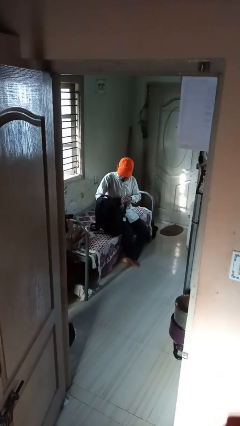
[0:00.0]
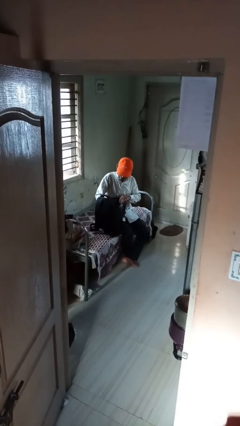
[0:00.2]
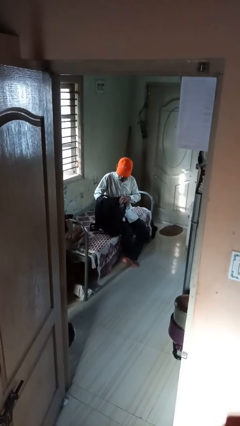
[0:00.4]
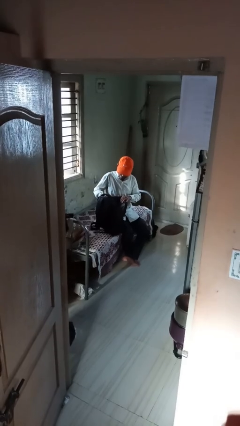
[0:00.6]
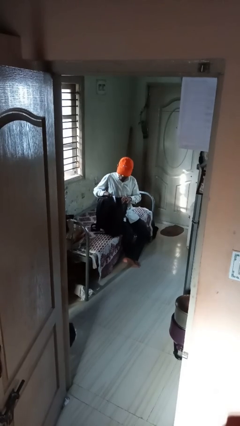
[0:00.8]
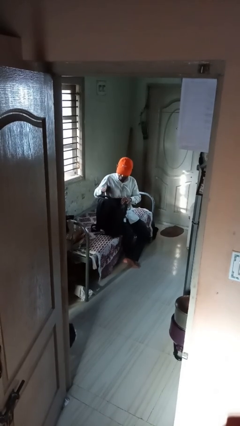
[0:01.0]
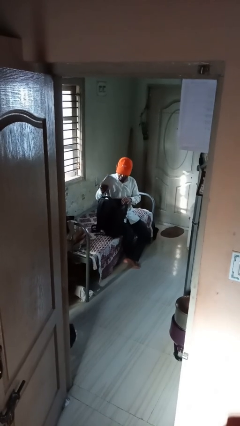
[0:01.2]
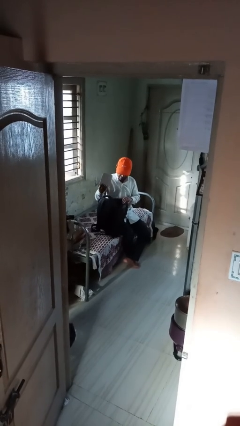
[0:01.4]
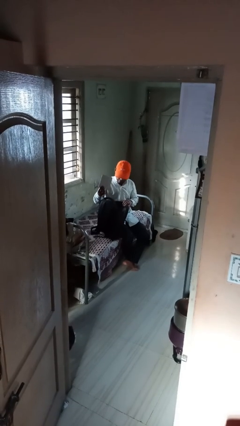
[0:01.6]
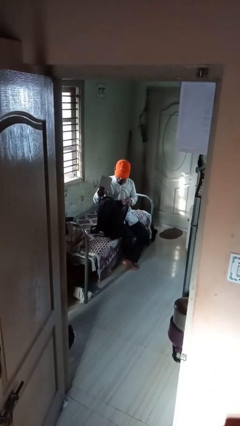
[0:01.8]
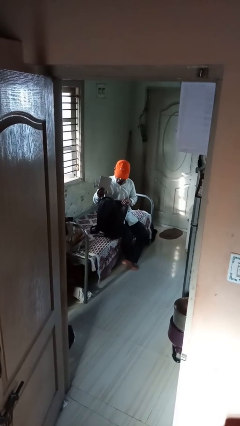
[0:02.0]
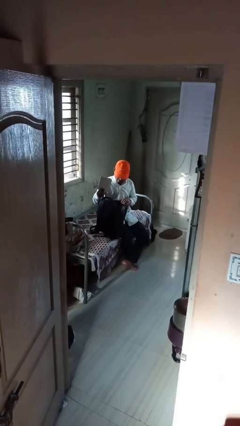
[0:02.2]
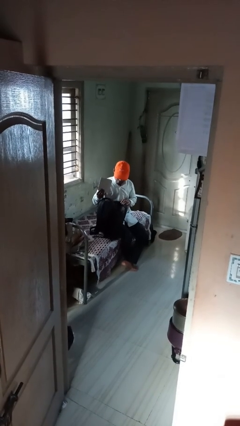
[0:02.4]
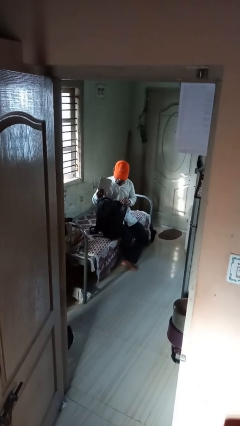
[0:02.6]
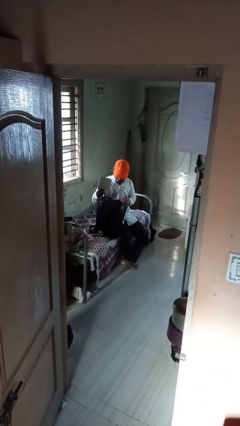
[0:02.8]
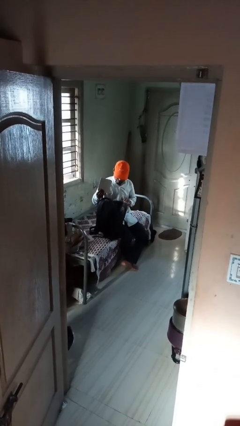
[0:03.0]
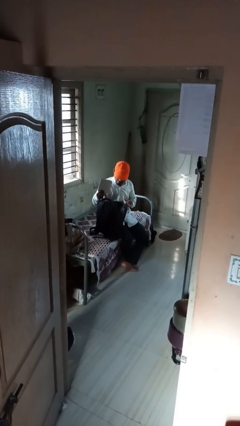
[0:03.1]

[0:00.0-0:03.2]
person takes object from backpack

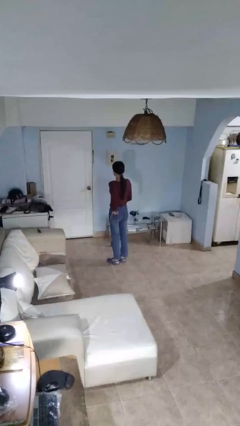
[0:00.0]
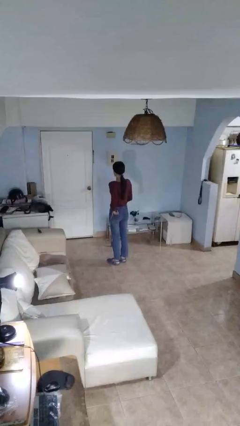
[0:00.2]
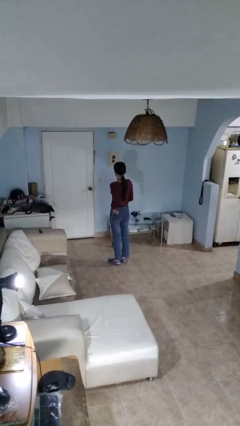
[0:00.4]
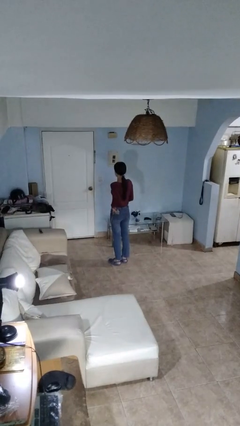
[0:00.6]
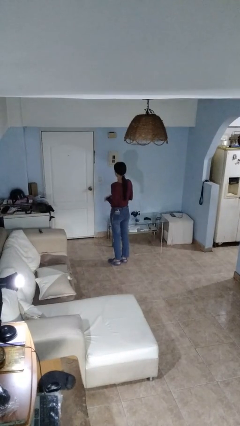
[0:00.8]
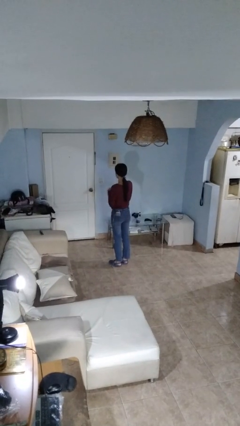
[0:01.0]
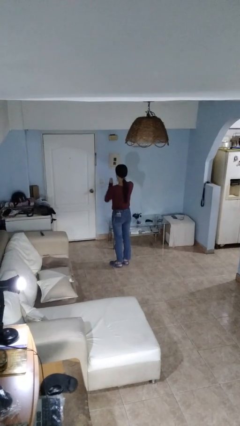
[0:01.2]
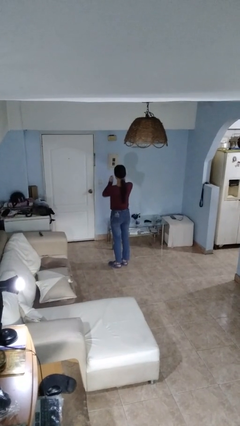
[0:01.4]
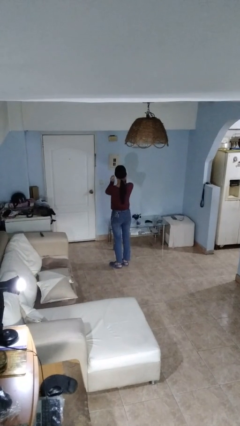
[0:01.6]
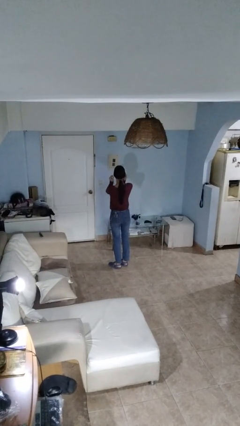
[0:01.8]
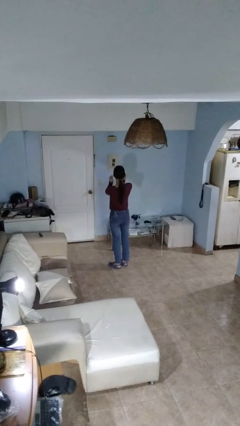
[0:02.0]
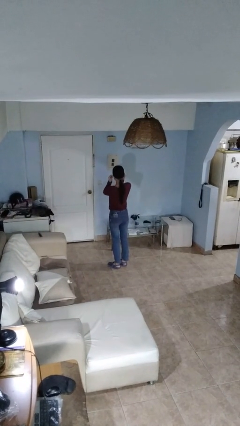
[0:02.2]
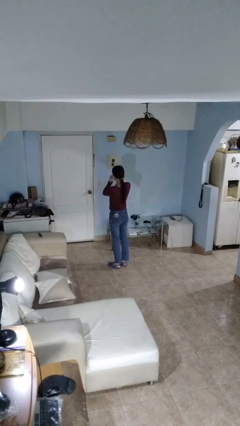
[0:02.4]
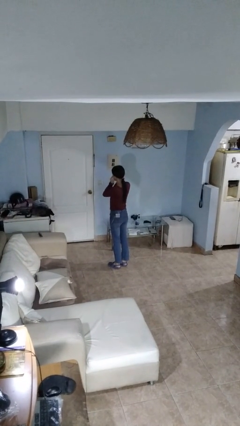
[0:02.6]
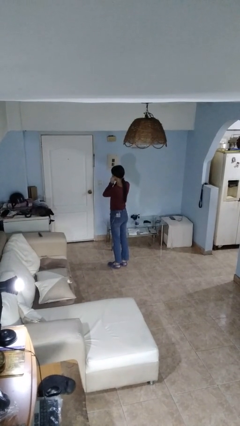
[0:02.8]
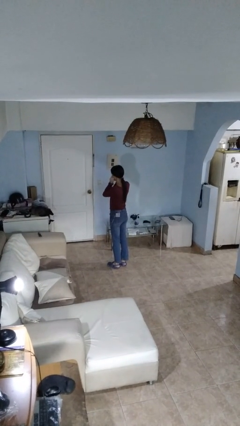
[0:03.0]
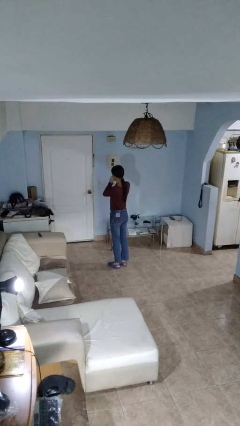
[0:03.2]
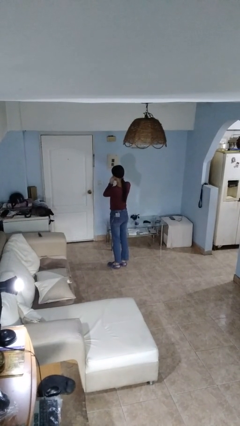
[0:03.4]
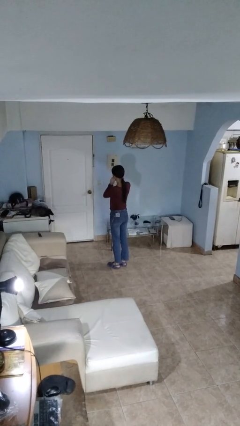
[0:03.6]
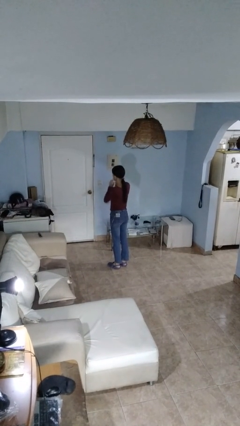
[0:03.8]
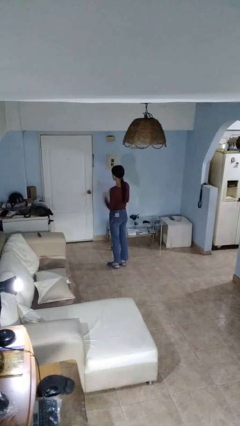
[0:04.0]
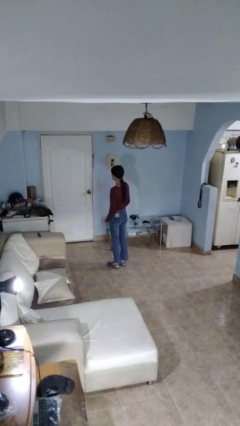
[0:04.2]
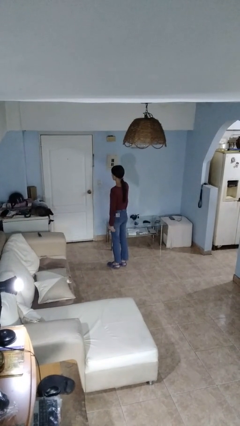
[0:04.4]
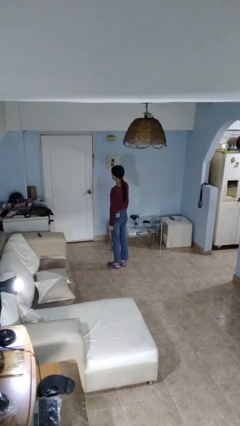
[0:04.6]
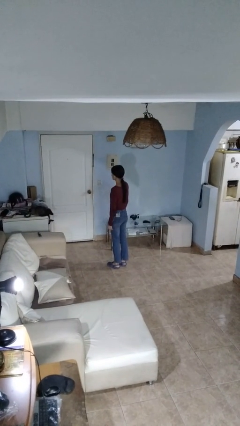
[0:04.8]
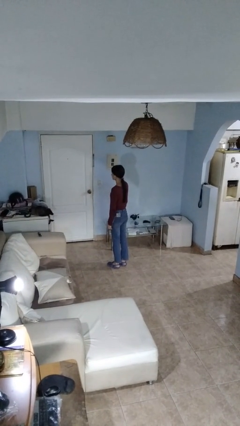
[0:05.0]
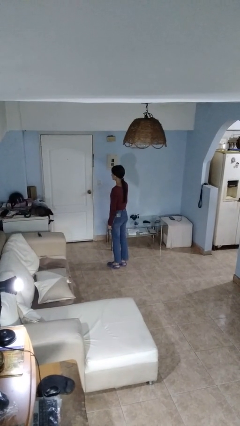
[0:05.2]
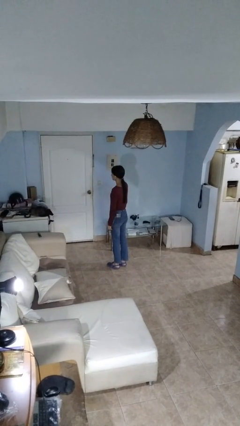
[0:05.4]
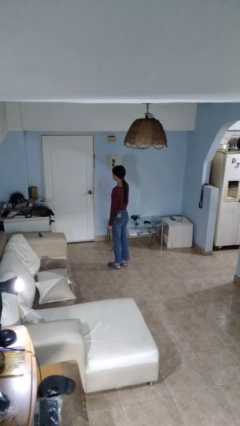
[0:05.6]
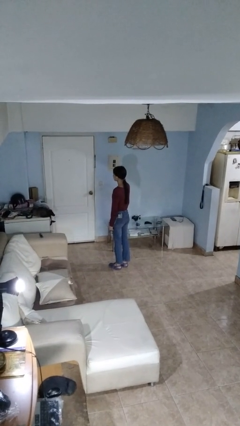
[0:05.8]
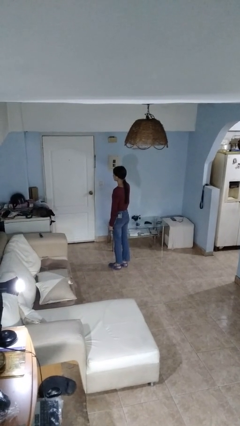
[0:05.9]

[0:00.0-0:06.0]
person puts on headphones

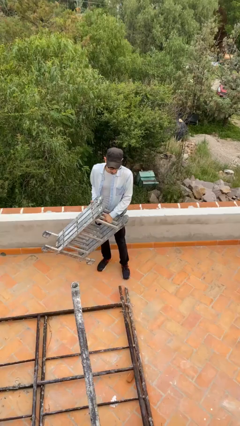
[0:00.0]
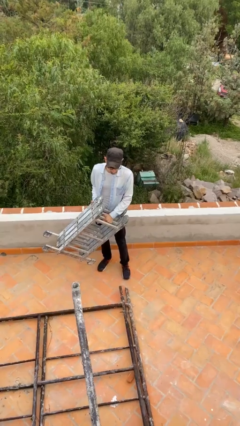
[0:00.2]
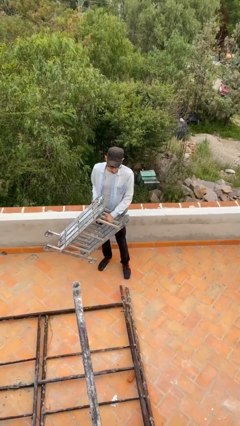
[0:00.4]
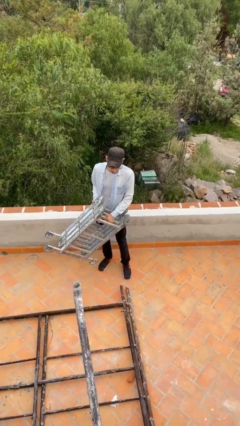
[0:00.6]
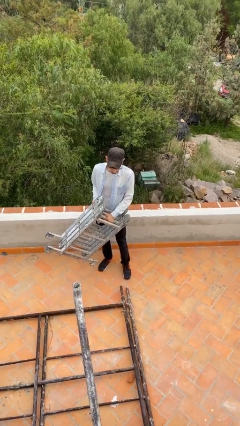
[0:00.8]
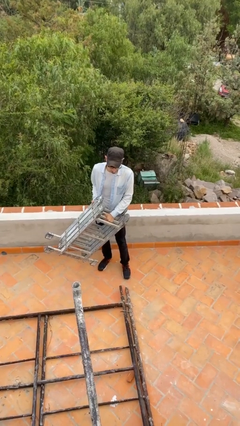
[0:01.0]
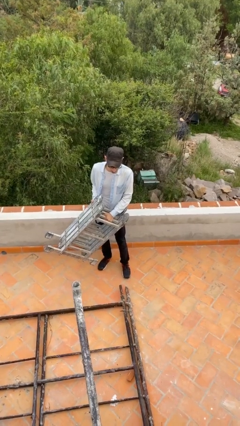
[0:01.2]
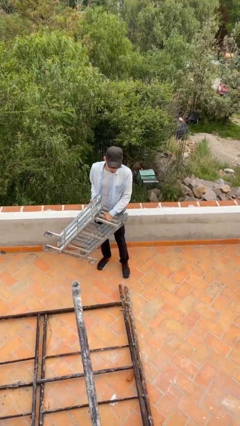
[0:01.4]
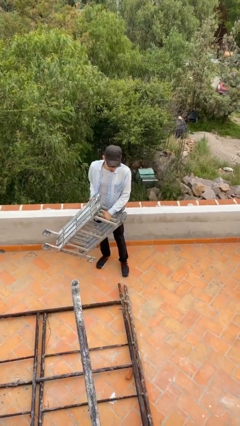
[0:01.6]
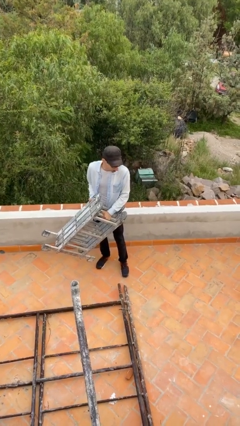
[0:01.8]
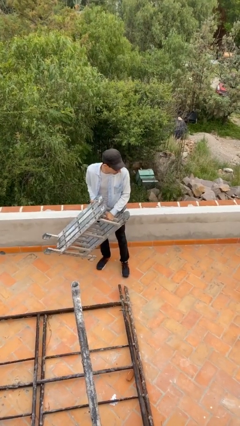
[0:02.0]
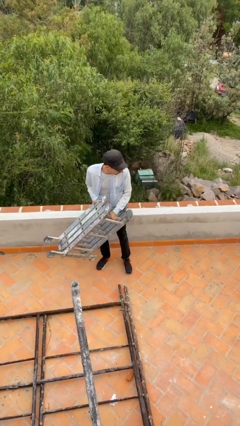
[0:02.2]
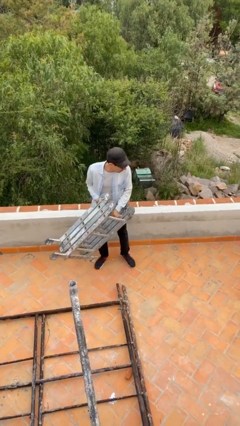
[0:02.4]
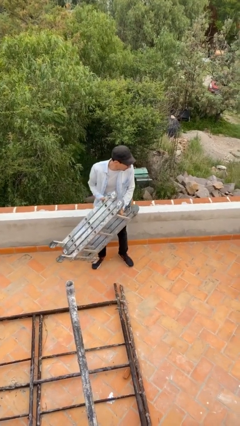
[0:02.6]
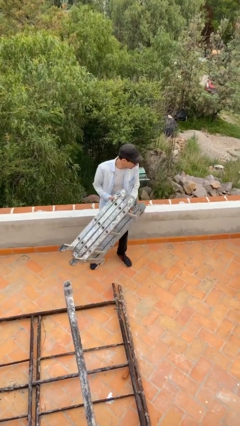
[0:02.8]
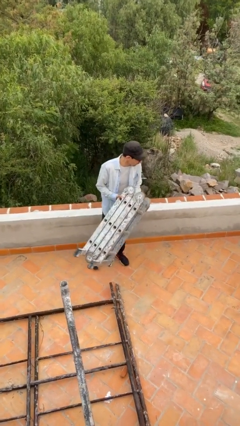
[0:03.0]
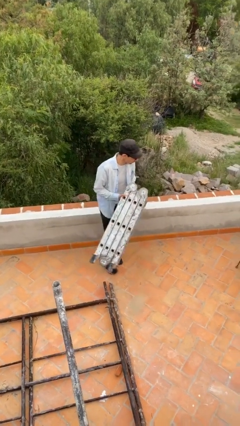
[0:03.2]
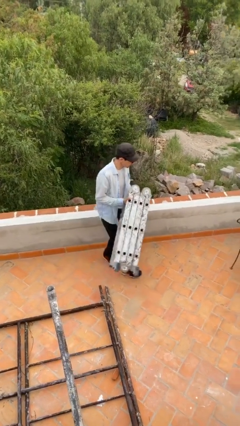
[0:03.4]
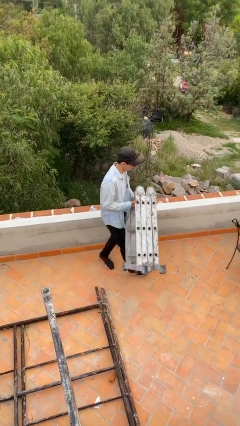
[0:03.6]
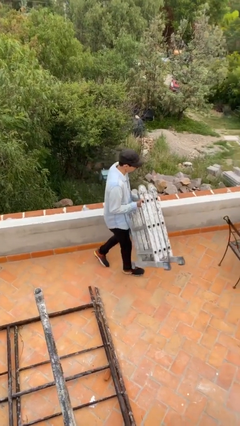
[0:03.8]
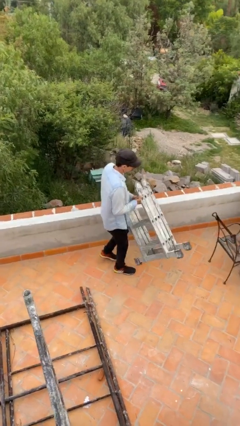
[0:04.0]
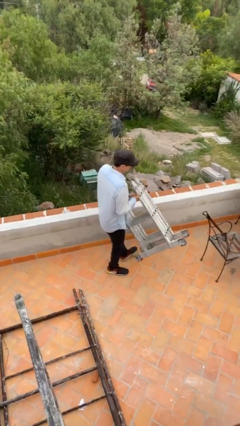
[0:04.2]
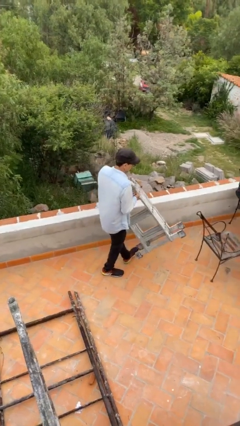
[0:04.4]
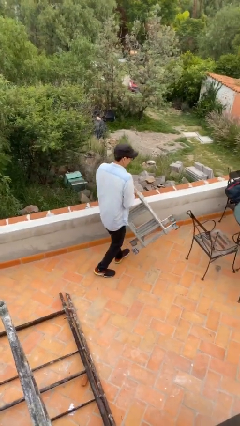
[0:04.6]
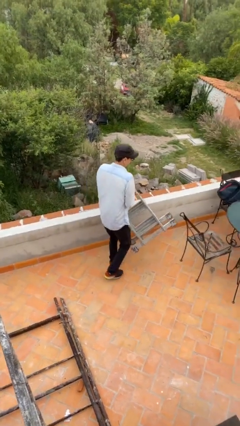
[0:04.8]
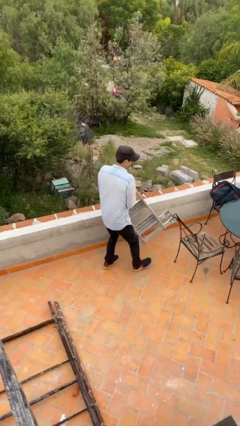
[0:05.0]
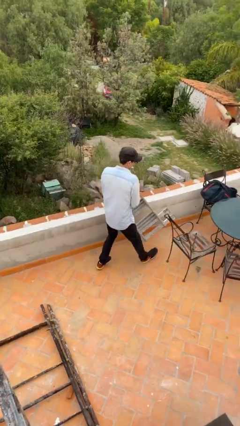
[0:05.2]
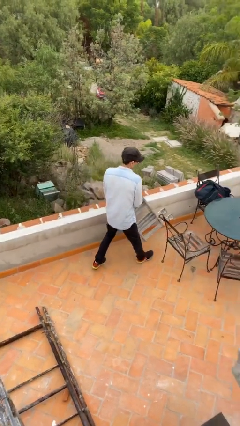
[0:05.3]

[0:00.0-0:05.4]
person carries heavy object

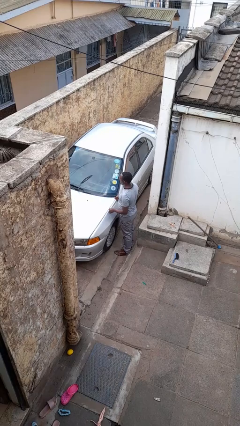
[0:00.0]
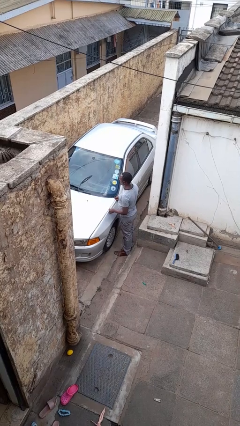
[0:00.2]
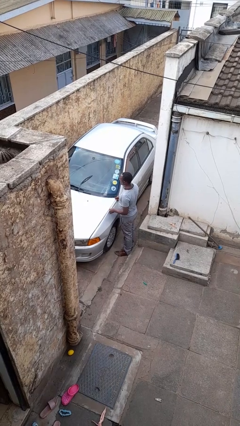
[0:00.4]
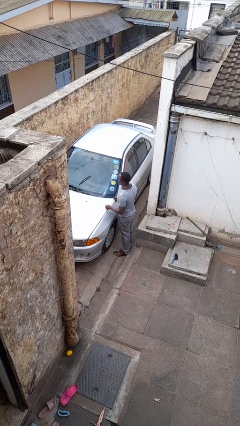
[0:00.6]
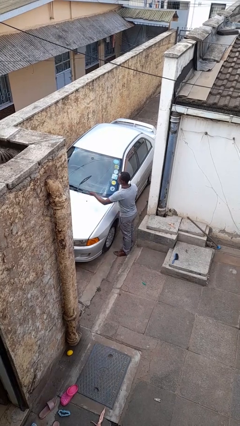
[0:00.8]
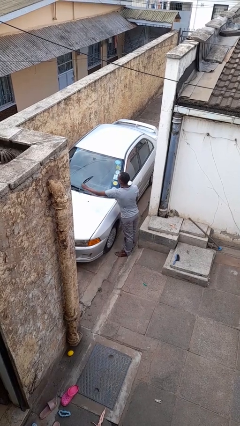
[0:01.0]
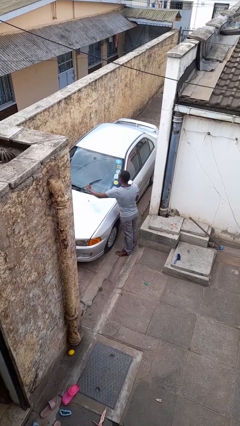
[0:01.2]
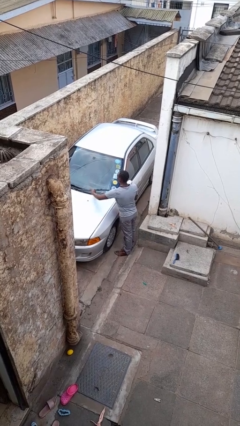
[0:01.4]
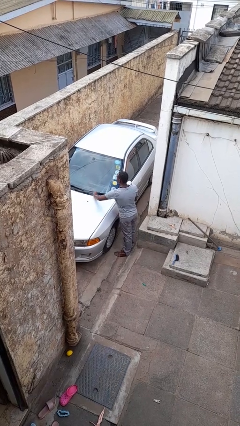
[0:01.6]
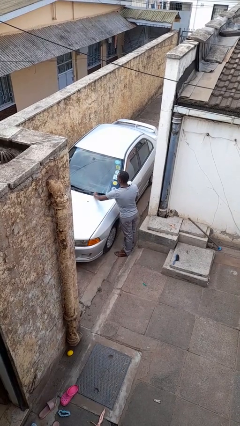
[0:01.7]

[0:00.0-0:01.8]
person flips down car wipers

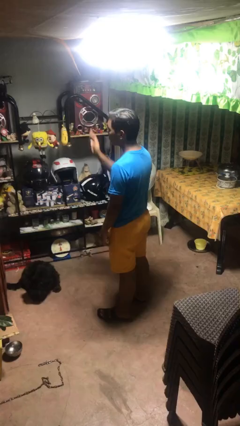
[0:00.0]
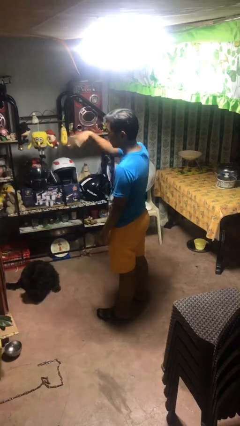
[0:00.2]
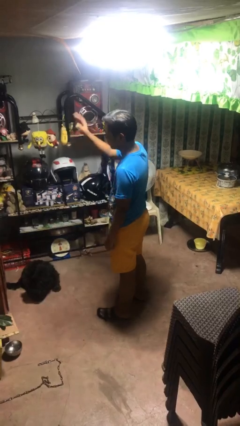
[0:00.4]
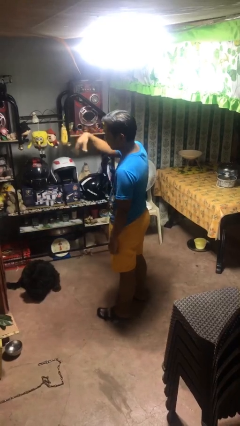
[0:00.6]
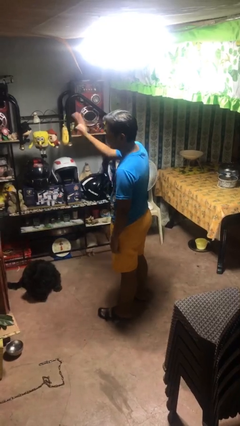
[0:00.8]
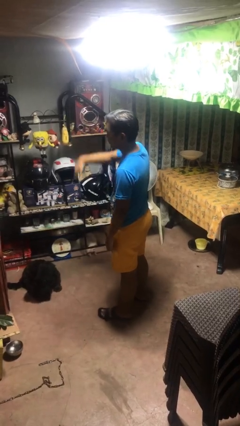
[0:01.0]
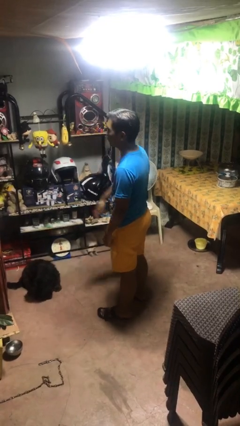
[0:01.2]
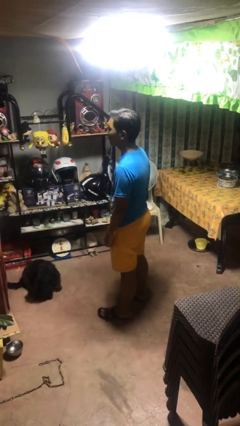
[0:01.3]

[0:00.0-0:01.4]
person gestures come here
